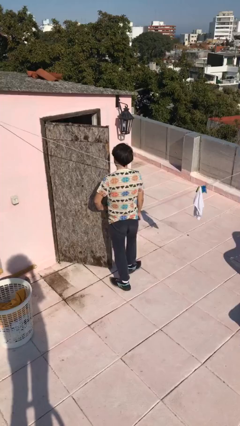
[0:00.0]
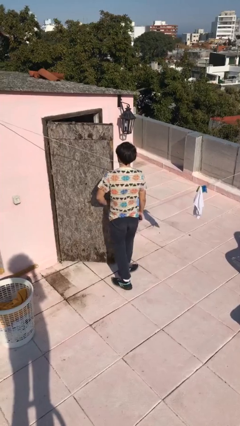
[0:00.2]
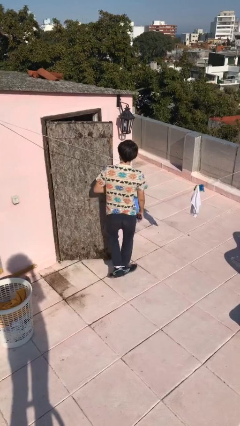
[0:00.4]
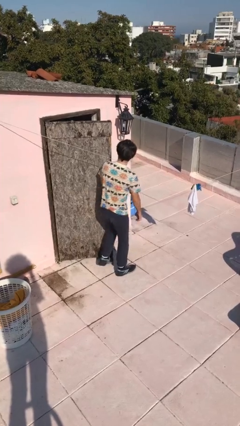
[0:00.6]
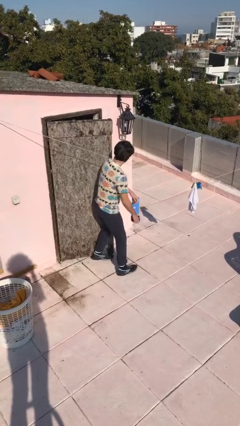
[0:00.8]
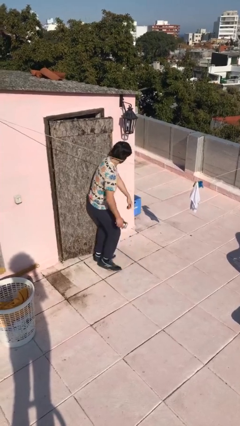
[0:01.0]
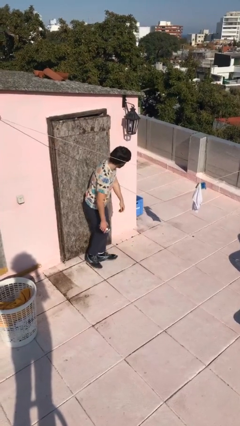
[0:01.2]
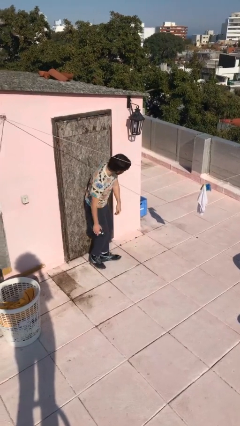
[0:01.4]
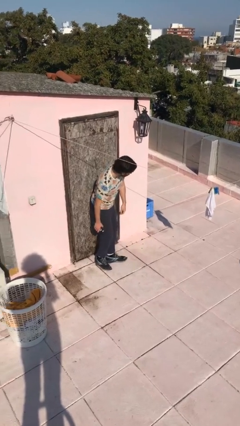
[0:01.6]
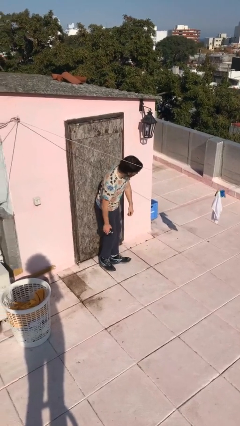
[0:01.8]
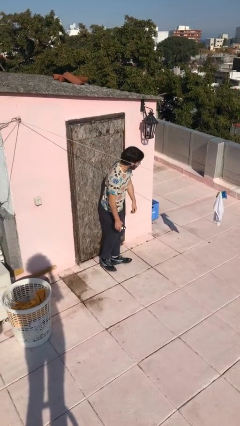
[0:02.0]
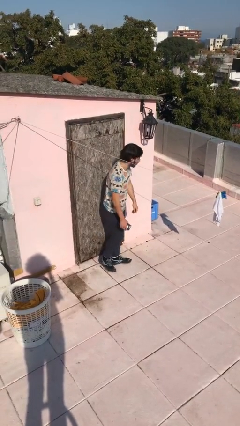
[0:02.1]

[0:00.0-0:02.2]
person closes door with hip

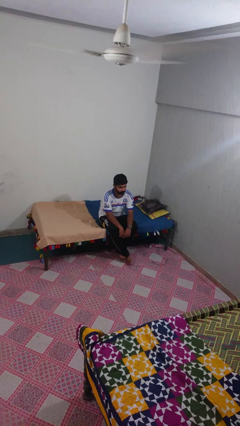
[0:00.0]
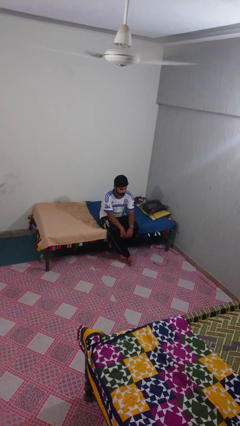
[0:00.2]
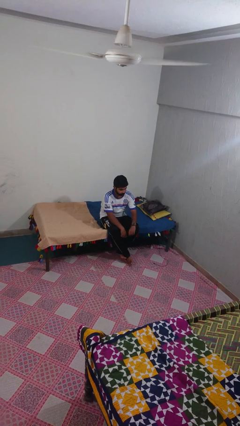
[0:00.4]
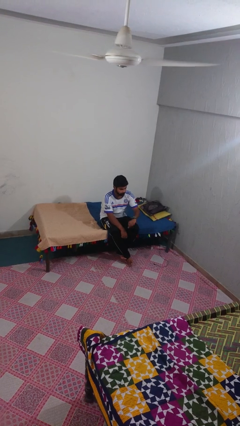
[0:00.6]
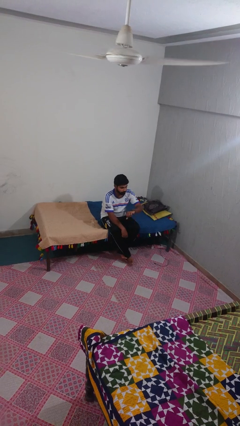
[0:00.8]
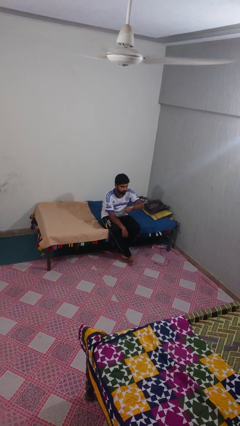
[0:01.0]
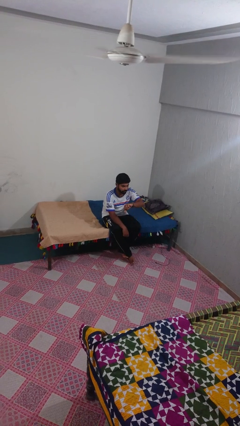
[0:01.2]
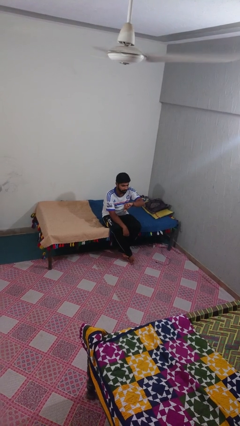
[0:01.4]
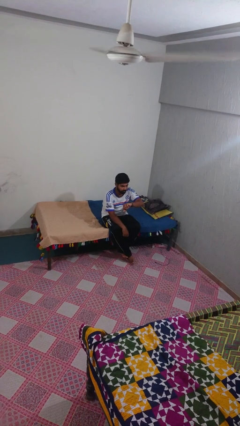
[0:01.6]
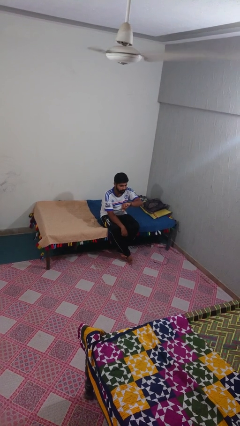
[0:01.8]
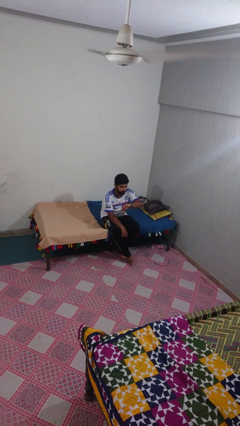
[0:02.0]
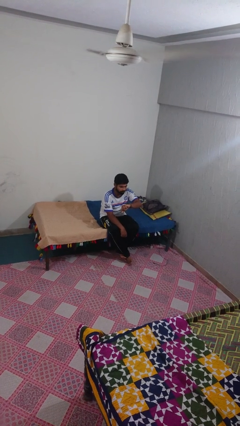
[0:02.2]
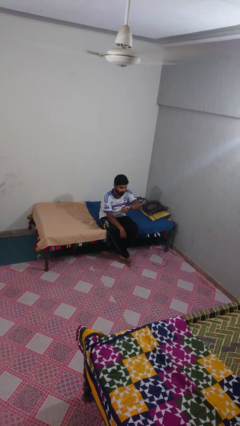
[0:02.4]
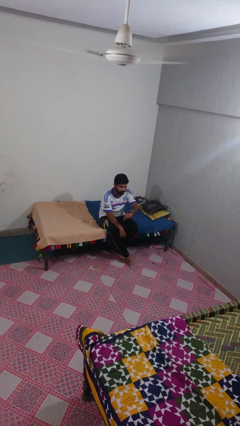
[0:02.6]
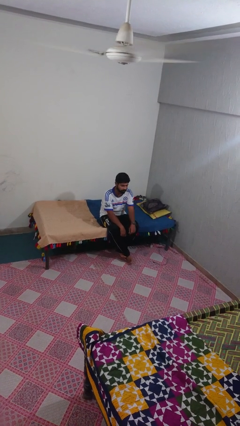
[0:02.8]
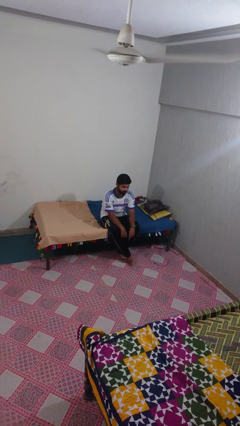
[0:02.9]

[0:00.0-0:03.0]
person looks at wristwatch

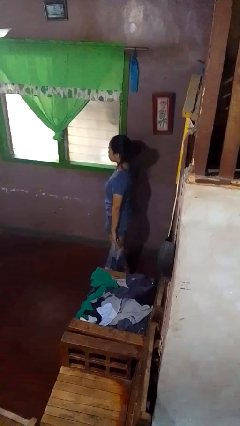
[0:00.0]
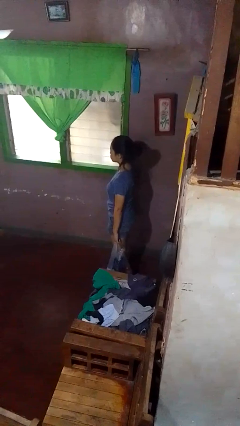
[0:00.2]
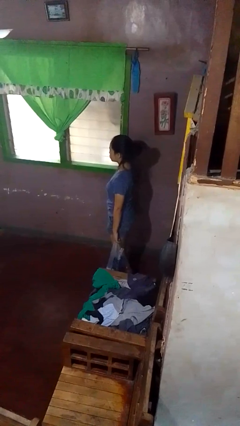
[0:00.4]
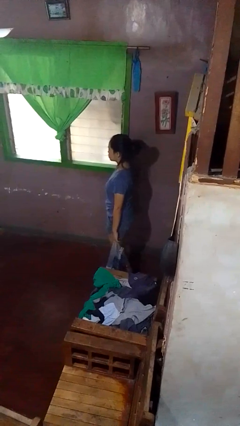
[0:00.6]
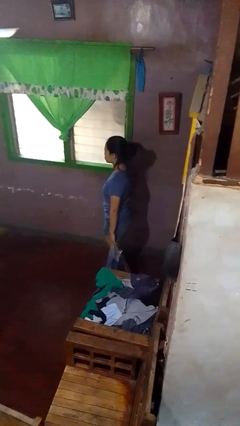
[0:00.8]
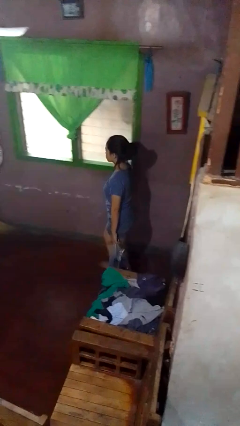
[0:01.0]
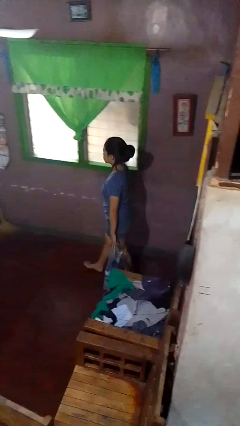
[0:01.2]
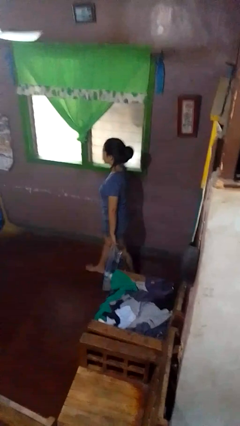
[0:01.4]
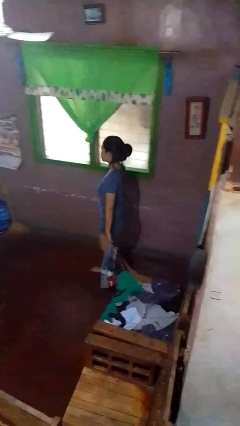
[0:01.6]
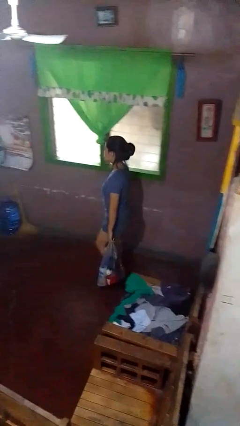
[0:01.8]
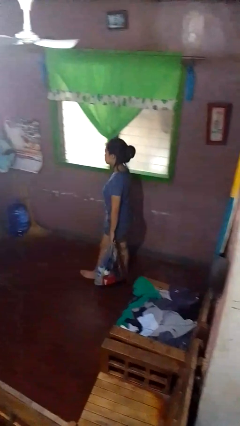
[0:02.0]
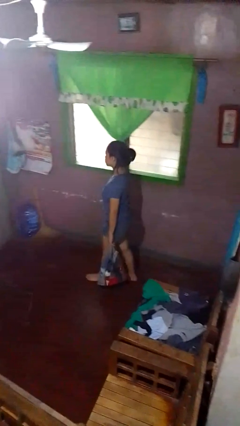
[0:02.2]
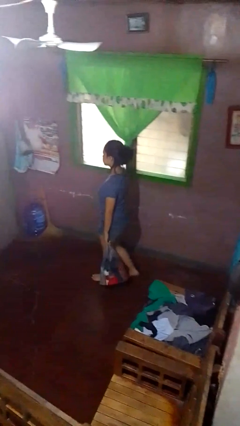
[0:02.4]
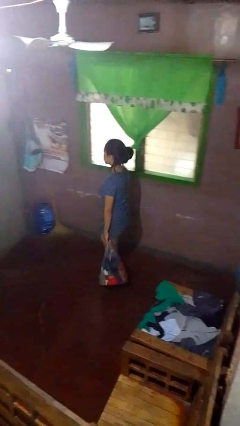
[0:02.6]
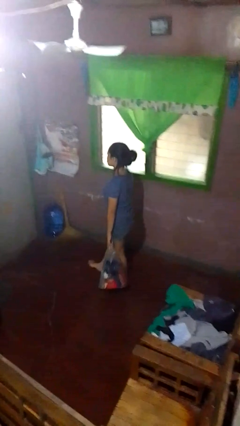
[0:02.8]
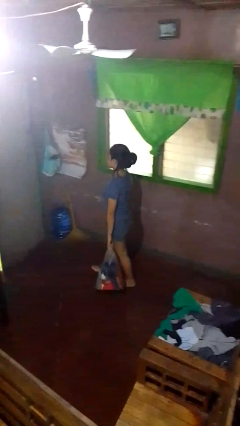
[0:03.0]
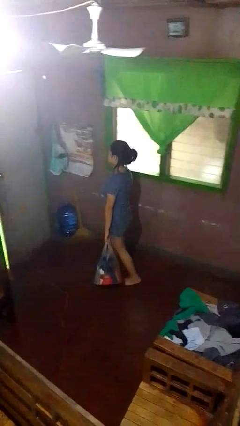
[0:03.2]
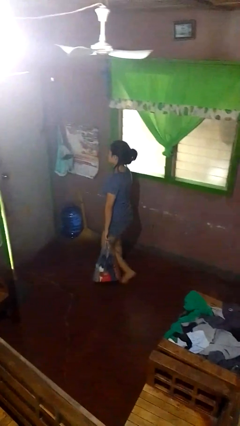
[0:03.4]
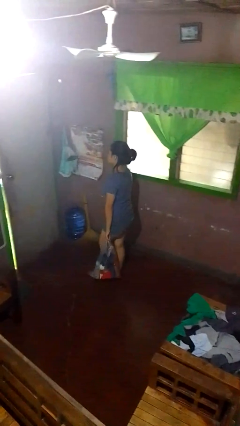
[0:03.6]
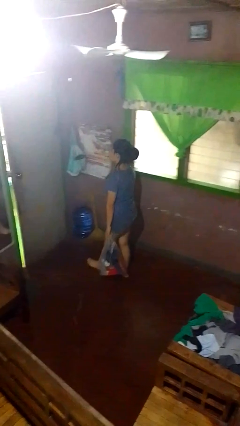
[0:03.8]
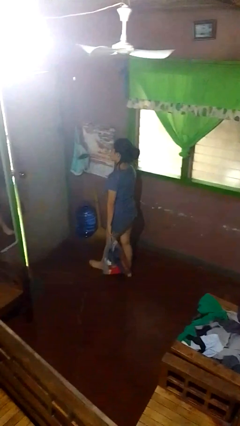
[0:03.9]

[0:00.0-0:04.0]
person carries groceries

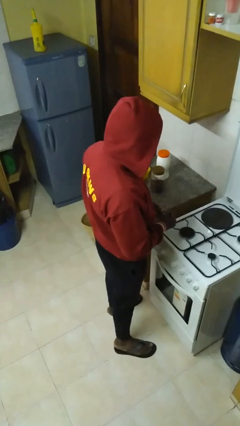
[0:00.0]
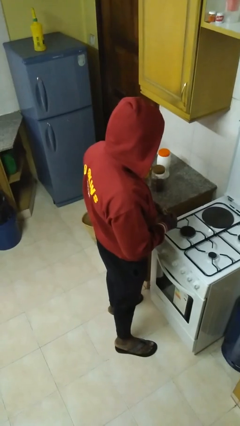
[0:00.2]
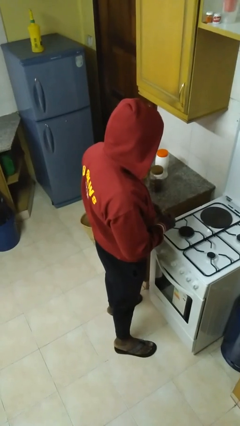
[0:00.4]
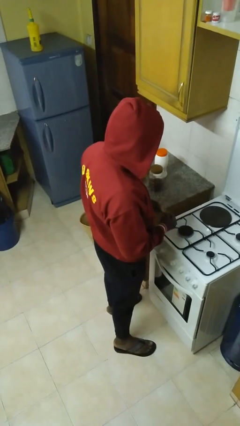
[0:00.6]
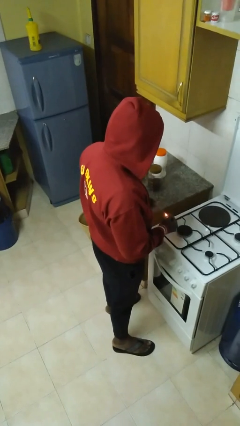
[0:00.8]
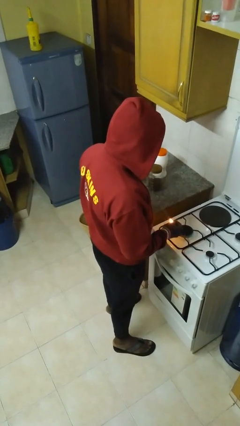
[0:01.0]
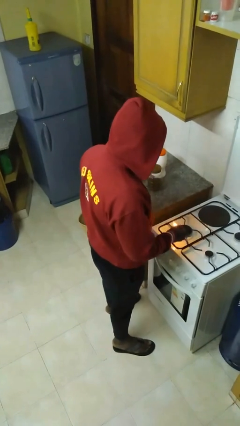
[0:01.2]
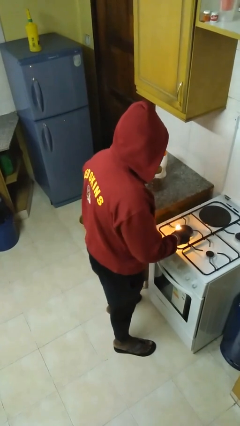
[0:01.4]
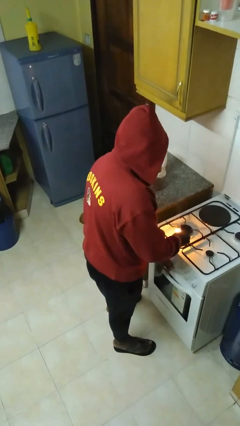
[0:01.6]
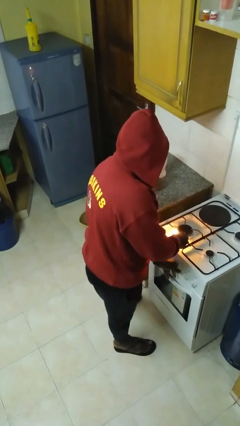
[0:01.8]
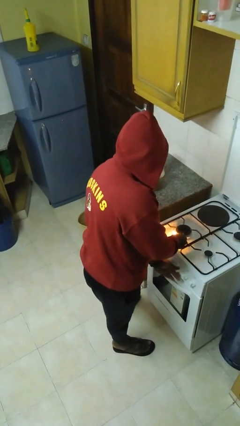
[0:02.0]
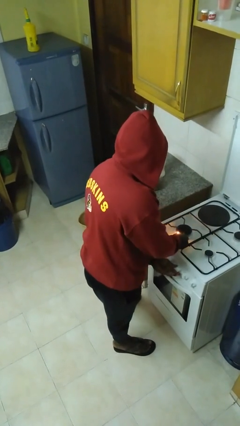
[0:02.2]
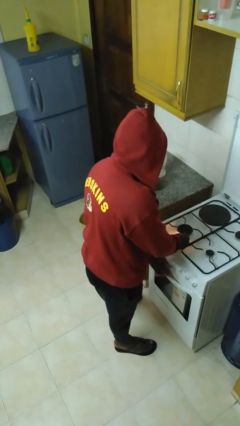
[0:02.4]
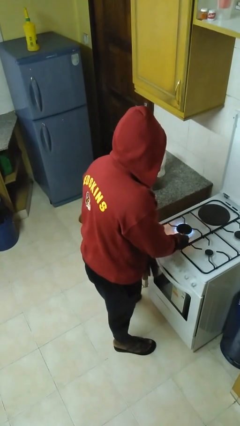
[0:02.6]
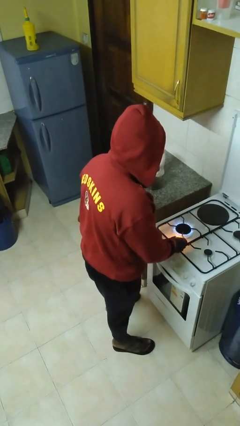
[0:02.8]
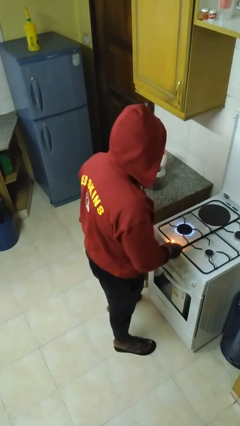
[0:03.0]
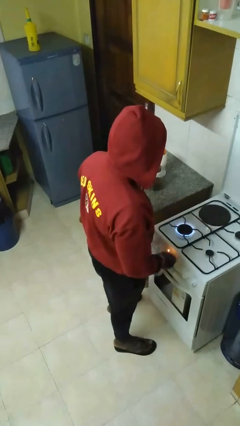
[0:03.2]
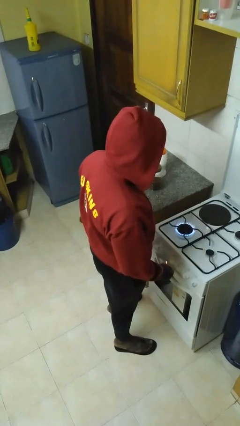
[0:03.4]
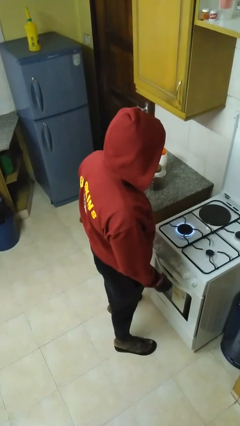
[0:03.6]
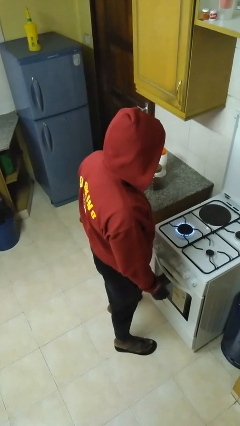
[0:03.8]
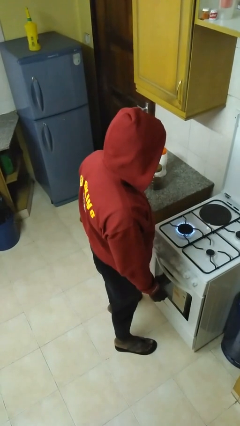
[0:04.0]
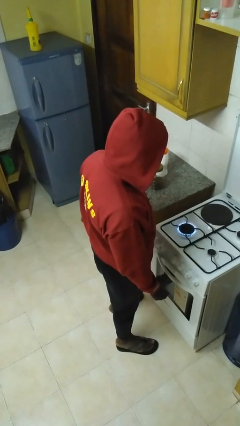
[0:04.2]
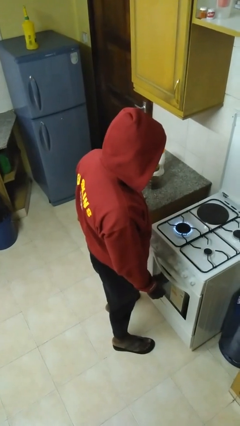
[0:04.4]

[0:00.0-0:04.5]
person turns on stovetop

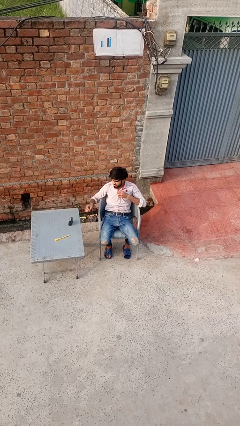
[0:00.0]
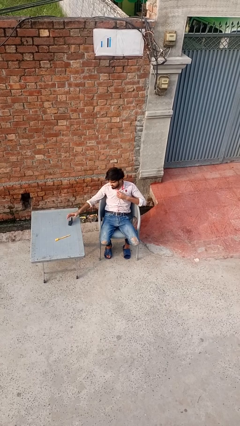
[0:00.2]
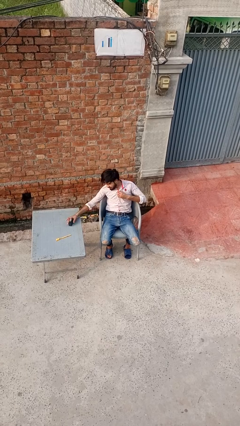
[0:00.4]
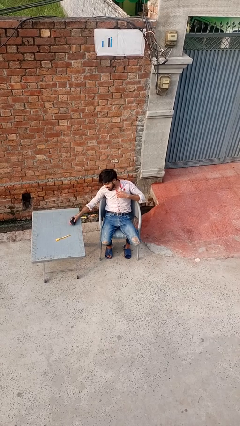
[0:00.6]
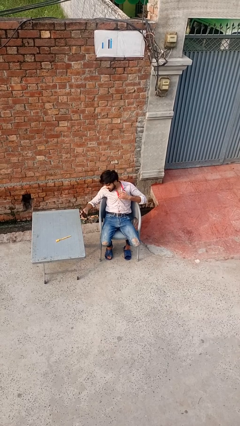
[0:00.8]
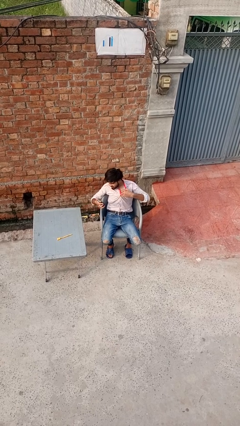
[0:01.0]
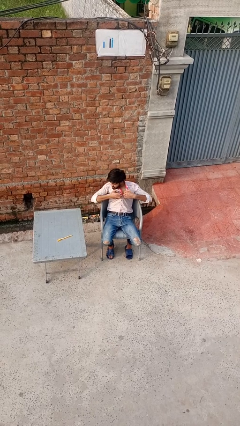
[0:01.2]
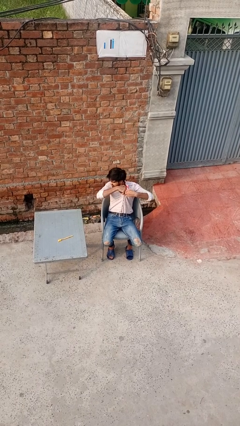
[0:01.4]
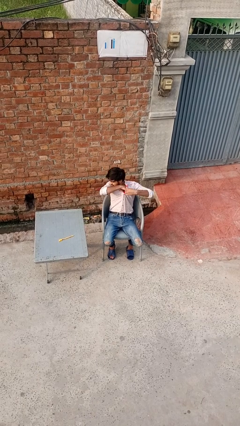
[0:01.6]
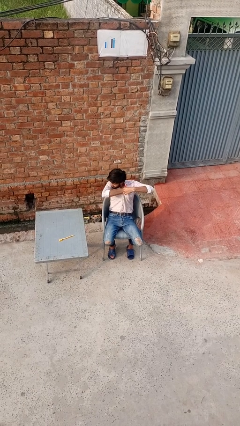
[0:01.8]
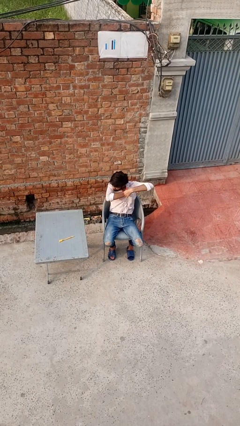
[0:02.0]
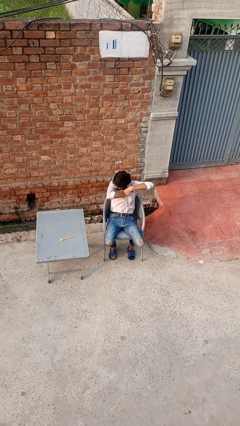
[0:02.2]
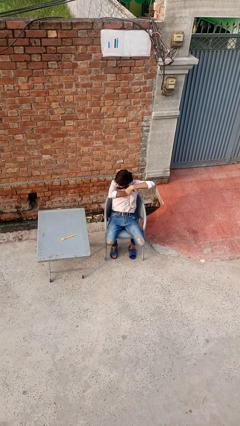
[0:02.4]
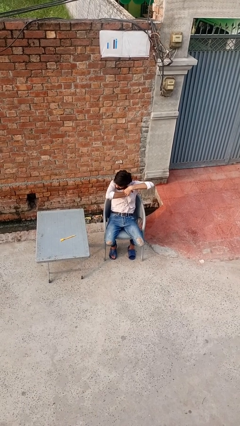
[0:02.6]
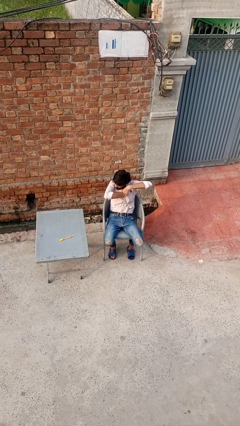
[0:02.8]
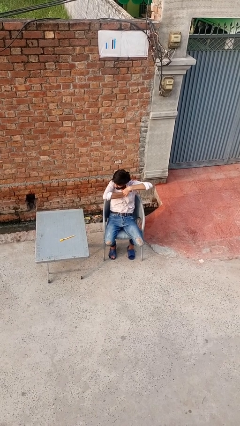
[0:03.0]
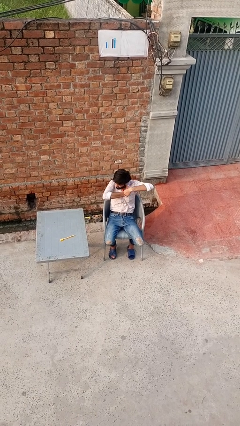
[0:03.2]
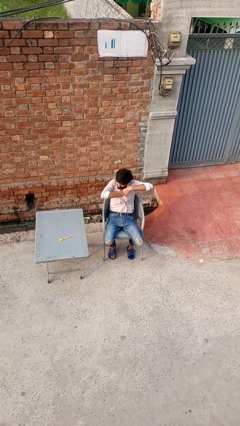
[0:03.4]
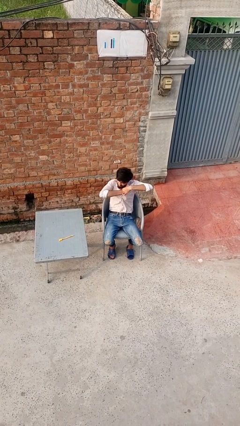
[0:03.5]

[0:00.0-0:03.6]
person applies deodorant

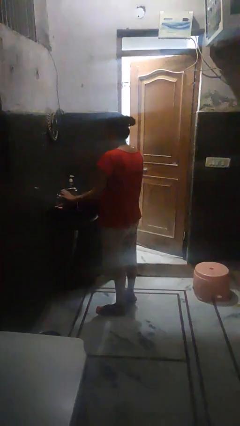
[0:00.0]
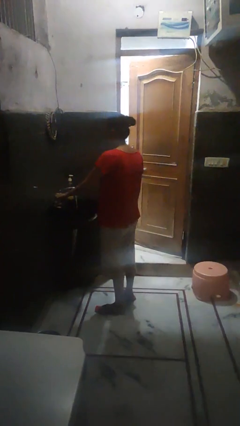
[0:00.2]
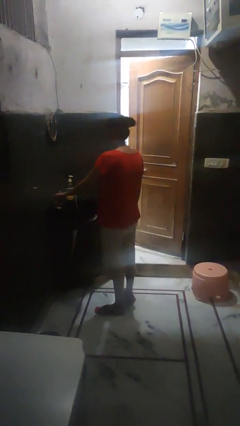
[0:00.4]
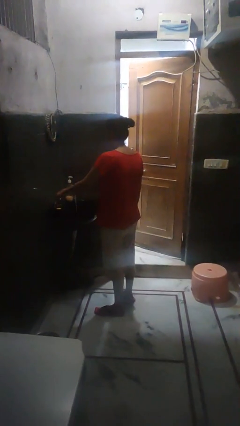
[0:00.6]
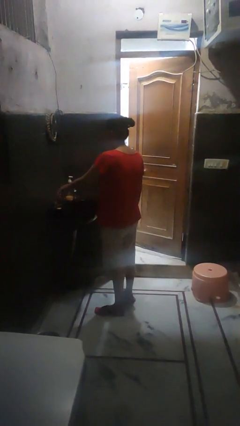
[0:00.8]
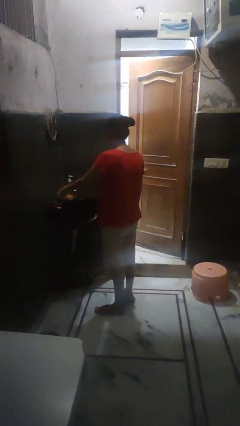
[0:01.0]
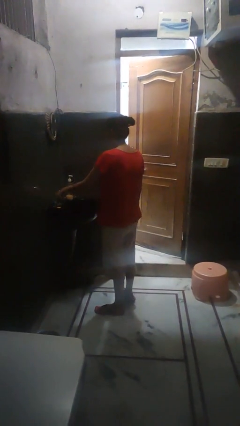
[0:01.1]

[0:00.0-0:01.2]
person turns off faucet
